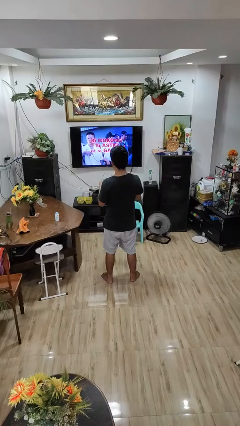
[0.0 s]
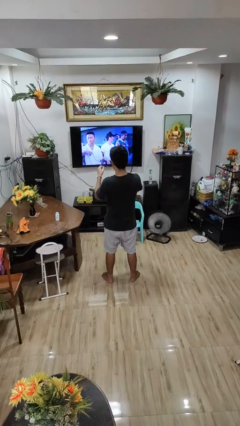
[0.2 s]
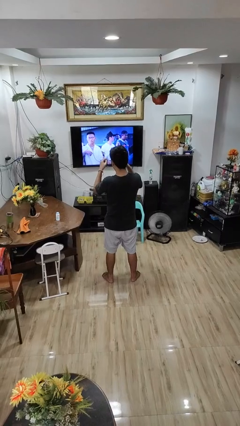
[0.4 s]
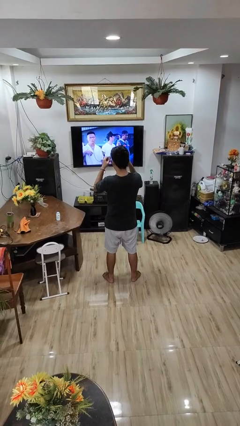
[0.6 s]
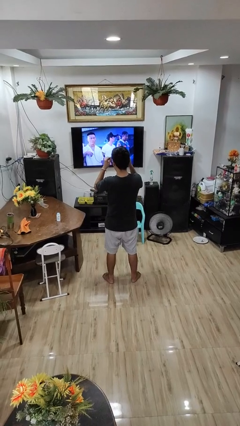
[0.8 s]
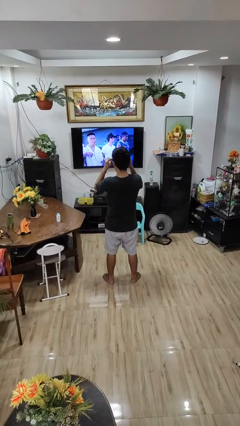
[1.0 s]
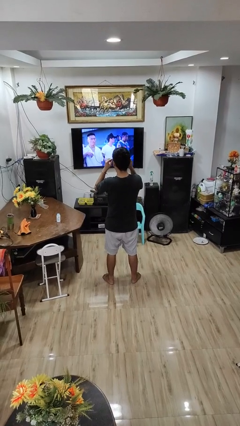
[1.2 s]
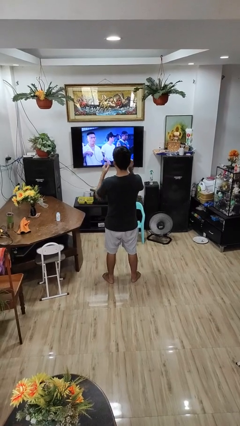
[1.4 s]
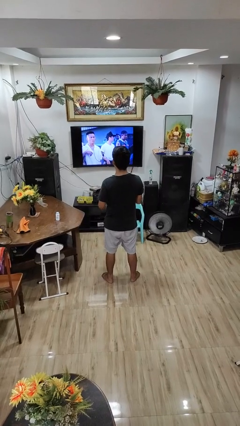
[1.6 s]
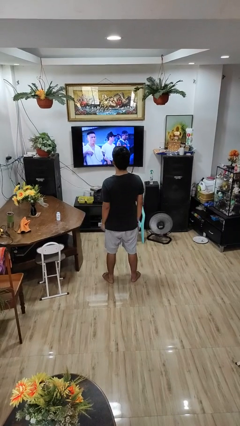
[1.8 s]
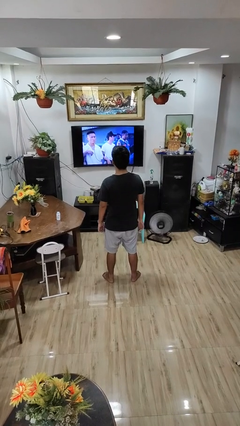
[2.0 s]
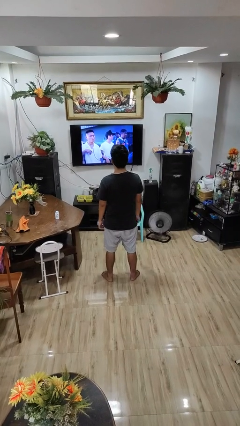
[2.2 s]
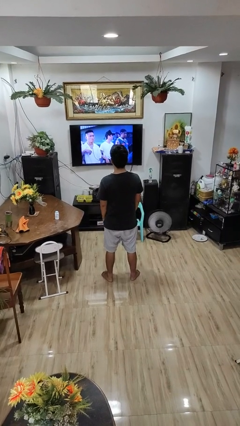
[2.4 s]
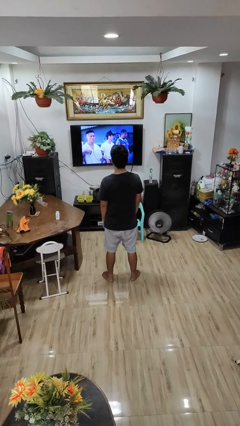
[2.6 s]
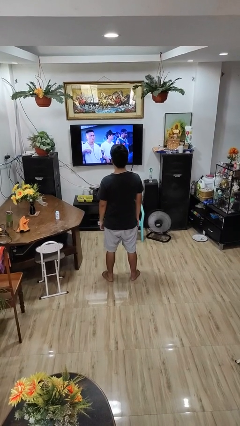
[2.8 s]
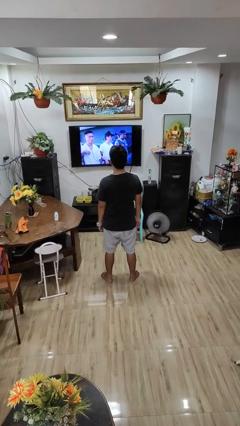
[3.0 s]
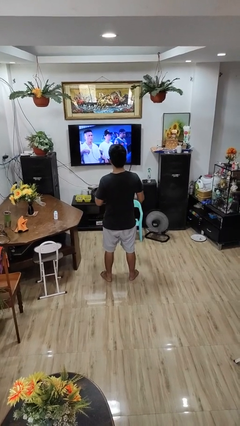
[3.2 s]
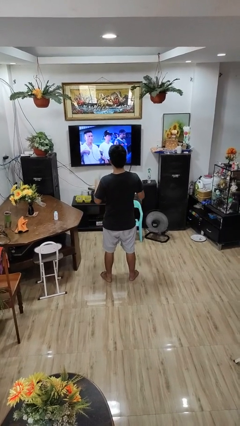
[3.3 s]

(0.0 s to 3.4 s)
person puts on glasses

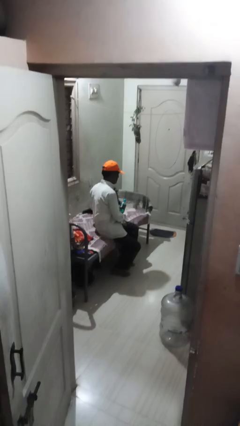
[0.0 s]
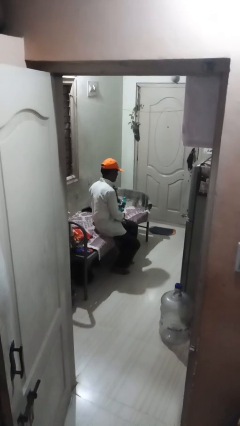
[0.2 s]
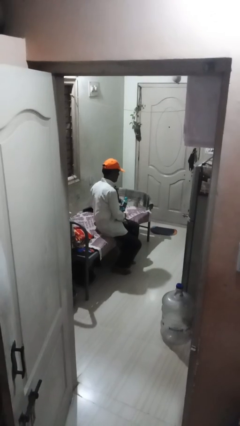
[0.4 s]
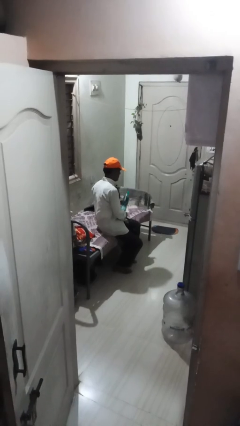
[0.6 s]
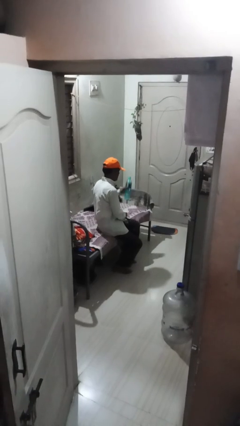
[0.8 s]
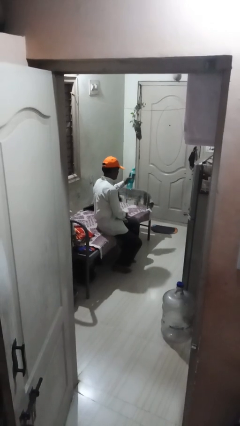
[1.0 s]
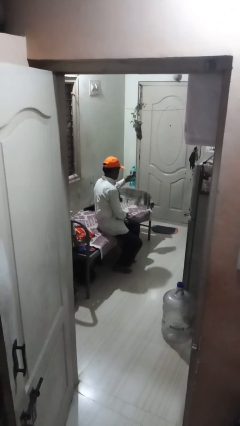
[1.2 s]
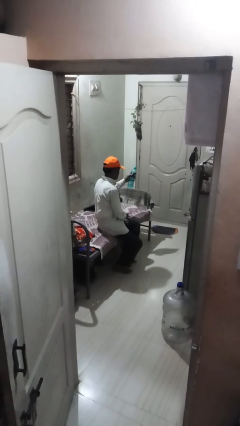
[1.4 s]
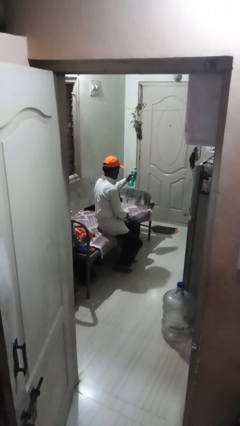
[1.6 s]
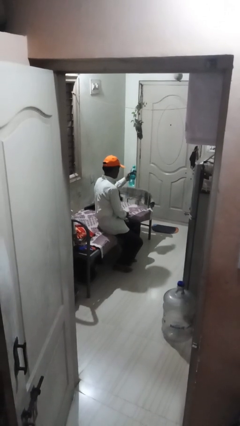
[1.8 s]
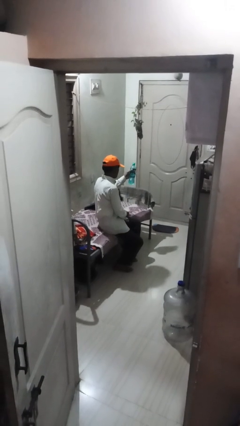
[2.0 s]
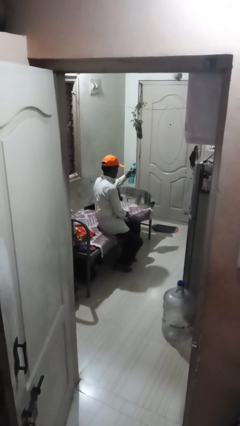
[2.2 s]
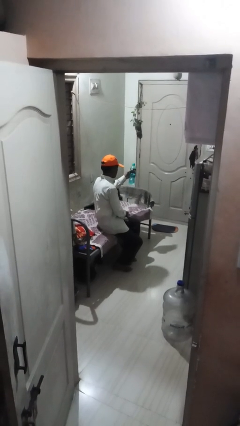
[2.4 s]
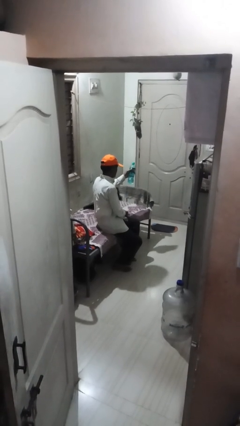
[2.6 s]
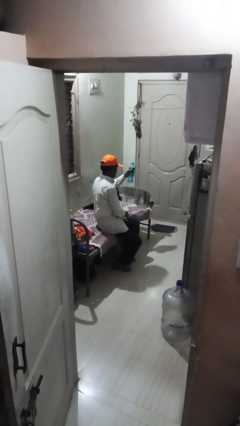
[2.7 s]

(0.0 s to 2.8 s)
person squeezes object

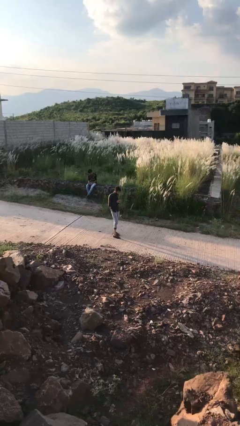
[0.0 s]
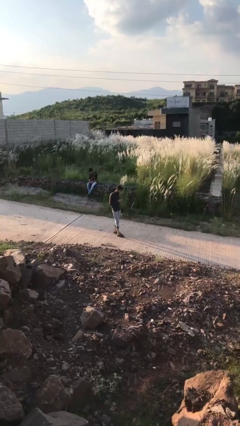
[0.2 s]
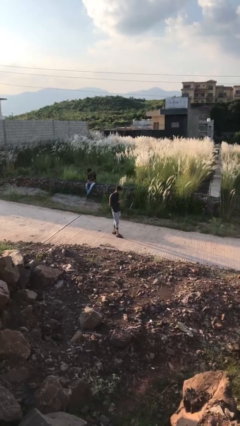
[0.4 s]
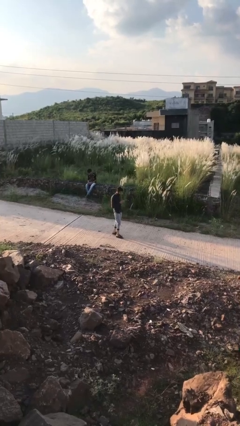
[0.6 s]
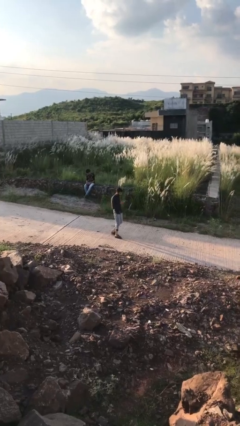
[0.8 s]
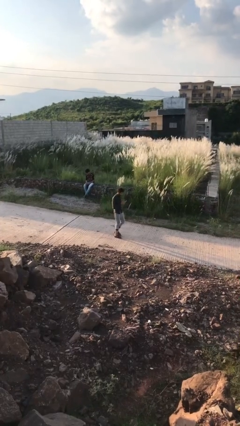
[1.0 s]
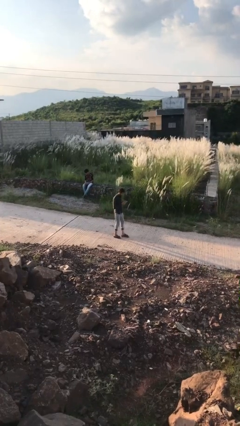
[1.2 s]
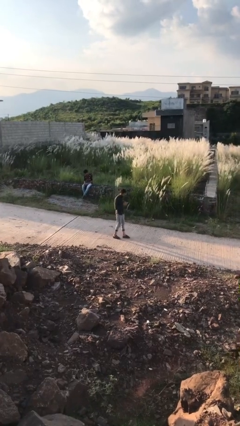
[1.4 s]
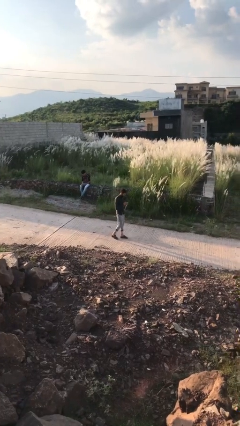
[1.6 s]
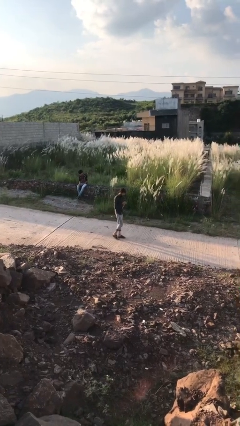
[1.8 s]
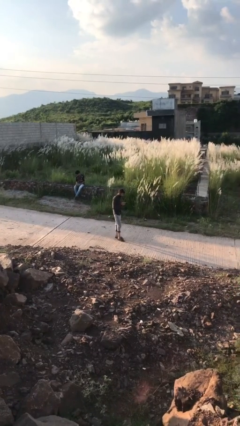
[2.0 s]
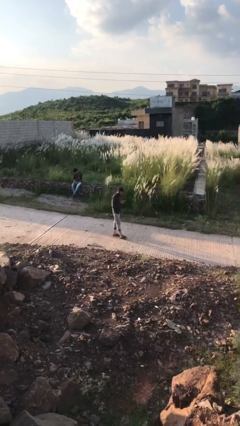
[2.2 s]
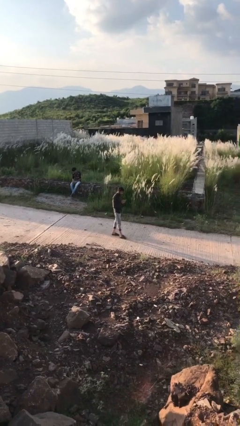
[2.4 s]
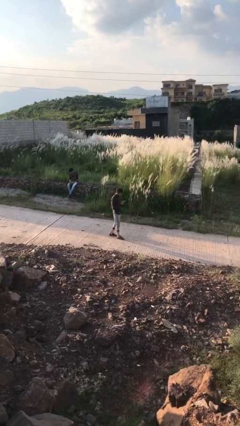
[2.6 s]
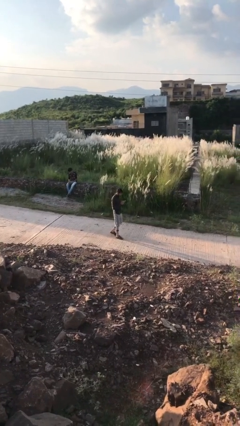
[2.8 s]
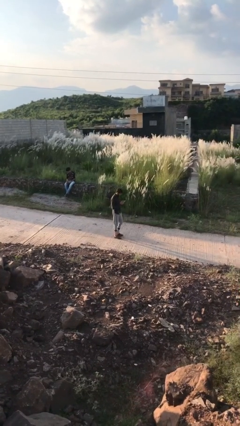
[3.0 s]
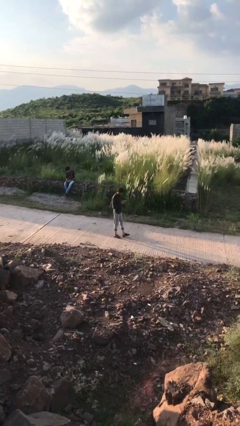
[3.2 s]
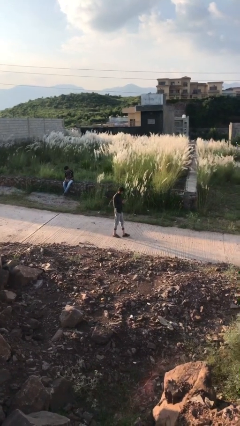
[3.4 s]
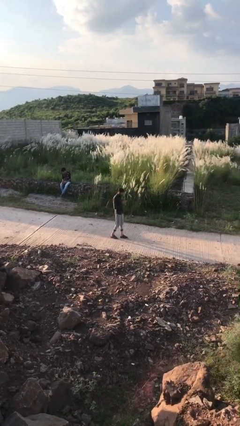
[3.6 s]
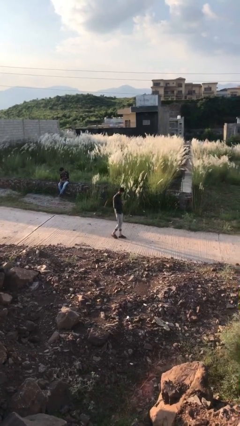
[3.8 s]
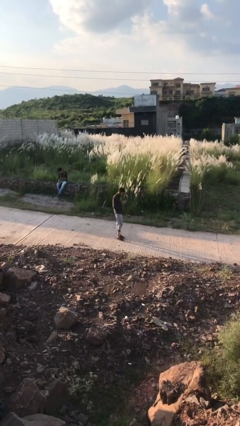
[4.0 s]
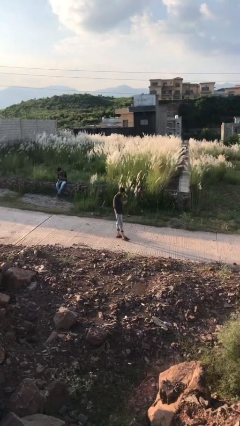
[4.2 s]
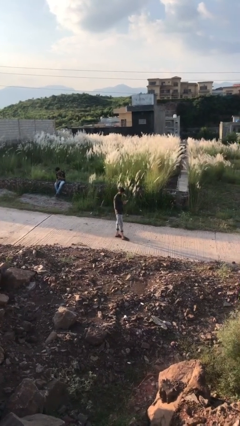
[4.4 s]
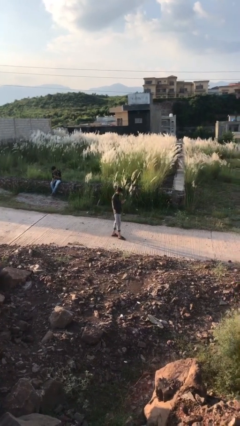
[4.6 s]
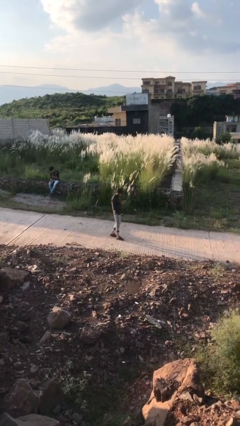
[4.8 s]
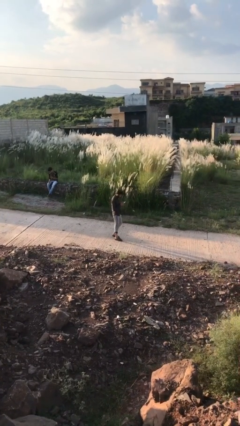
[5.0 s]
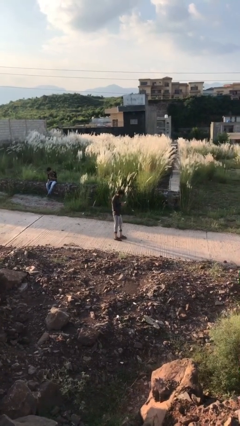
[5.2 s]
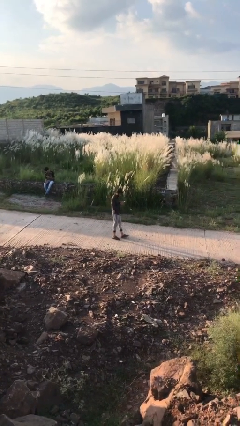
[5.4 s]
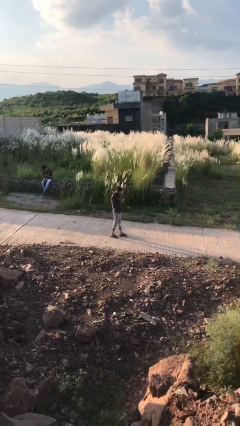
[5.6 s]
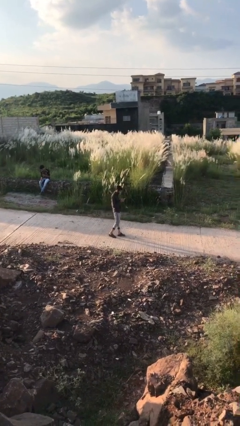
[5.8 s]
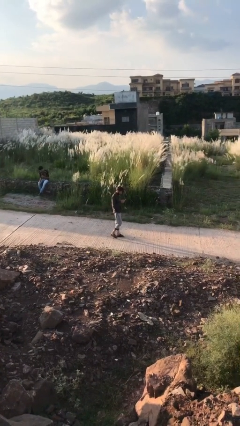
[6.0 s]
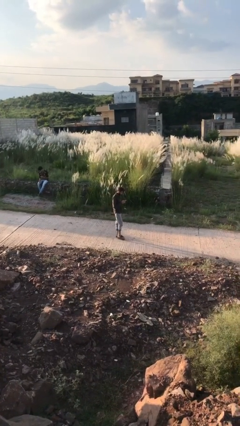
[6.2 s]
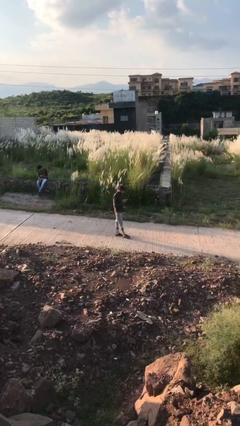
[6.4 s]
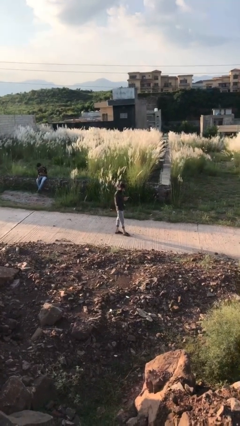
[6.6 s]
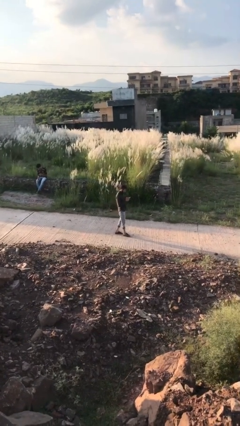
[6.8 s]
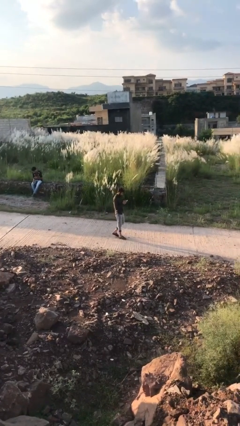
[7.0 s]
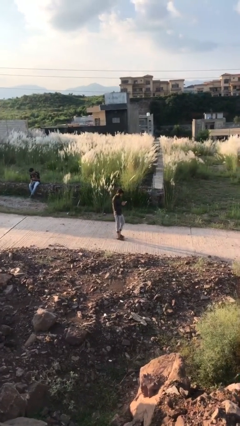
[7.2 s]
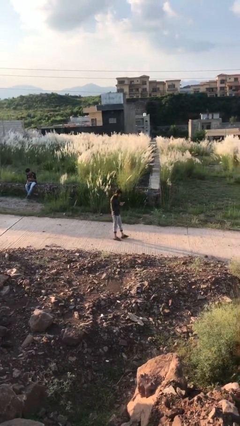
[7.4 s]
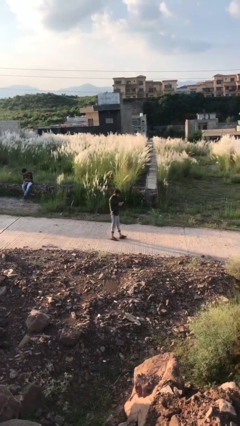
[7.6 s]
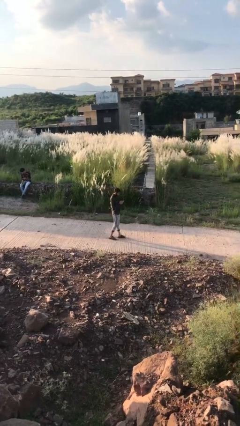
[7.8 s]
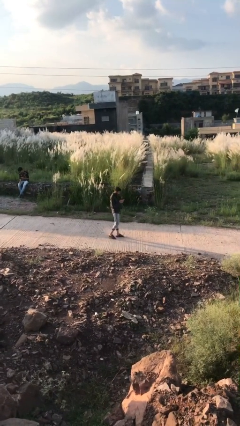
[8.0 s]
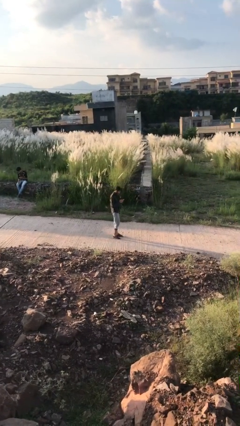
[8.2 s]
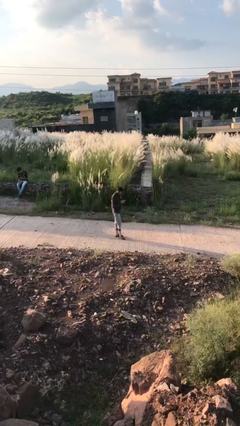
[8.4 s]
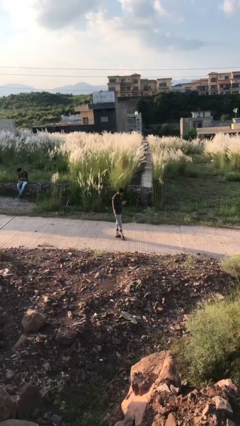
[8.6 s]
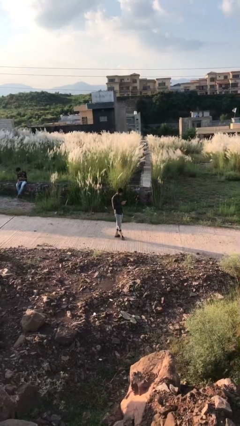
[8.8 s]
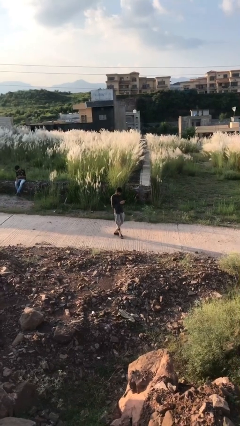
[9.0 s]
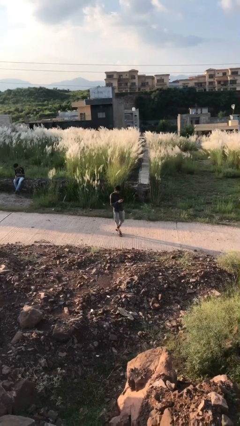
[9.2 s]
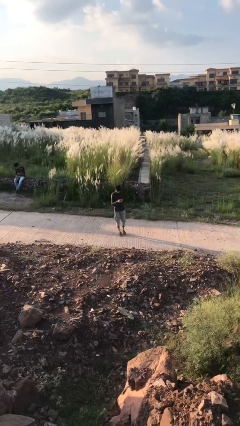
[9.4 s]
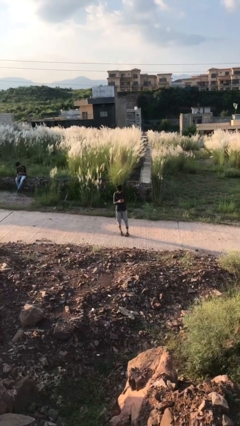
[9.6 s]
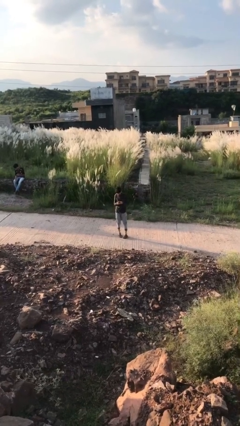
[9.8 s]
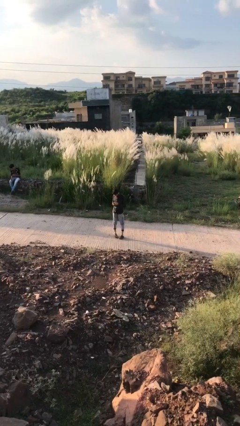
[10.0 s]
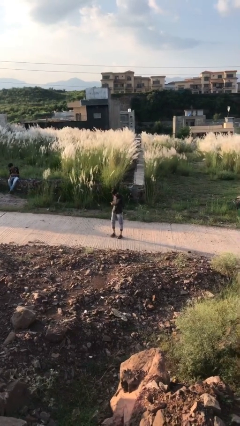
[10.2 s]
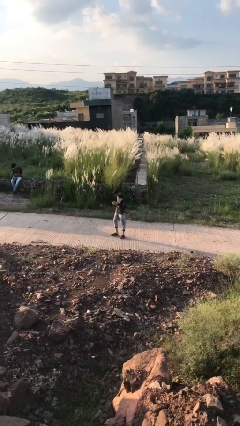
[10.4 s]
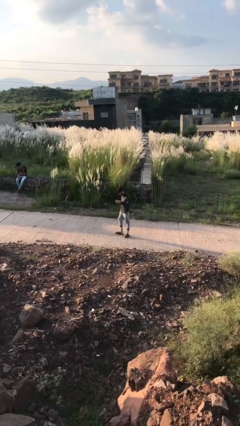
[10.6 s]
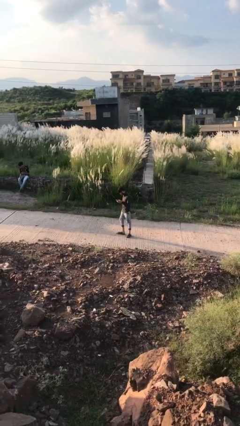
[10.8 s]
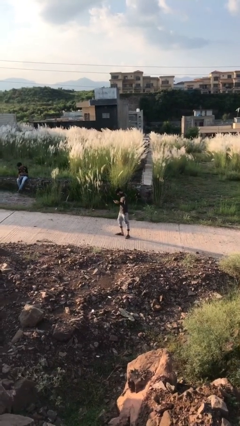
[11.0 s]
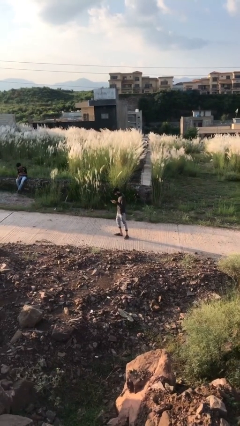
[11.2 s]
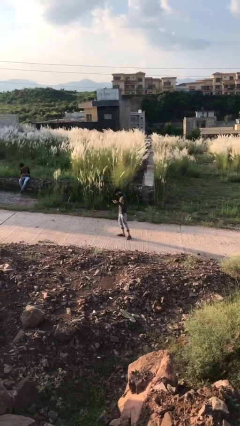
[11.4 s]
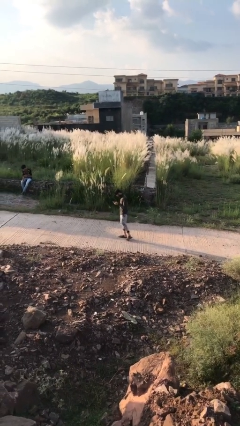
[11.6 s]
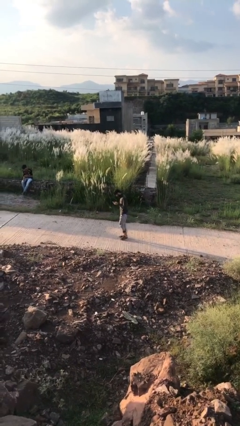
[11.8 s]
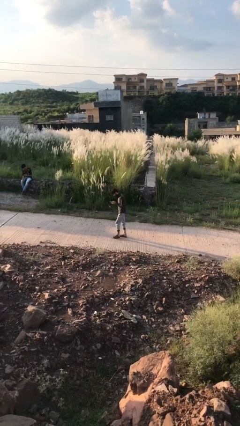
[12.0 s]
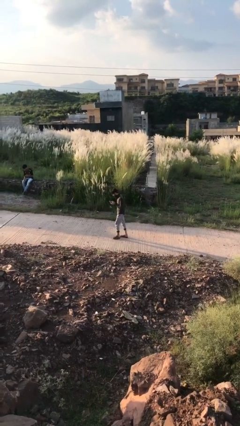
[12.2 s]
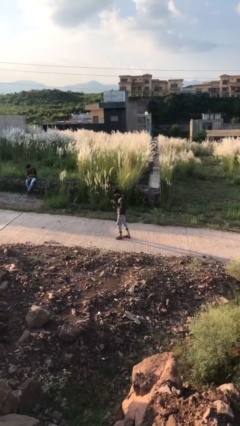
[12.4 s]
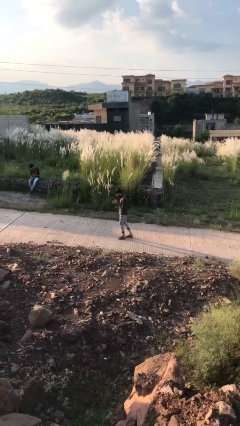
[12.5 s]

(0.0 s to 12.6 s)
person texts on phone
